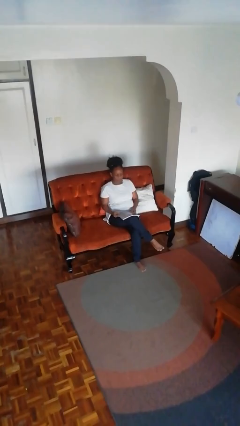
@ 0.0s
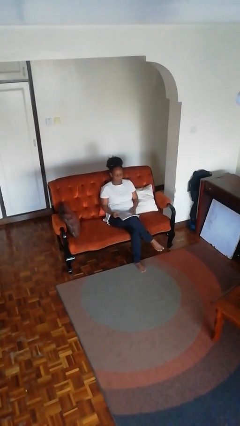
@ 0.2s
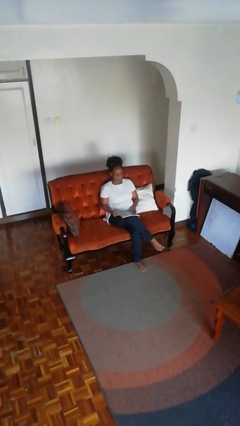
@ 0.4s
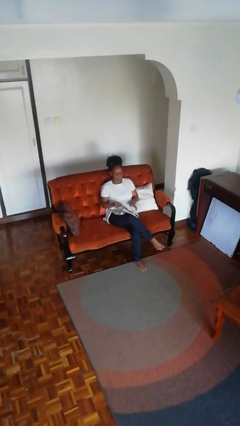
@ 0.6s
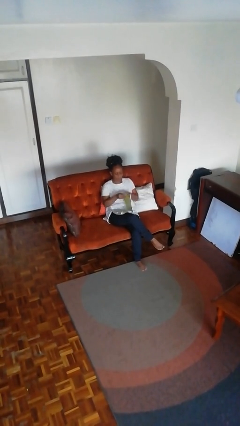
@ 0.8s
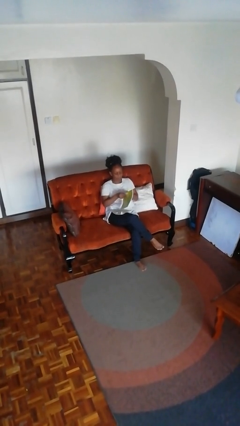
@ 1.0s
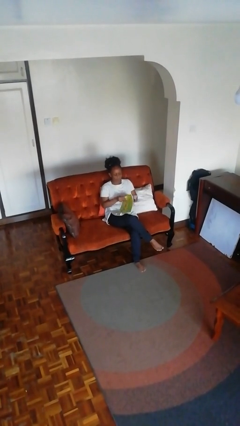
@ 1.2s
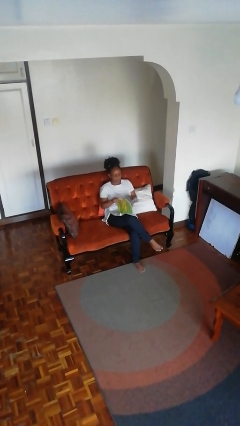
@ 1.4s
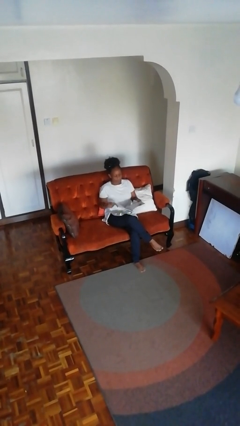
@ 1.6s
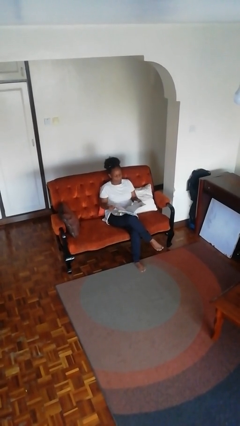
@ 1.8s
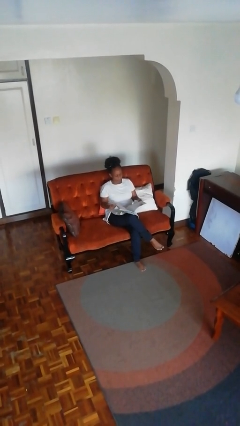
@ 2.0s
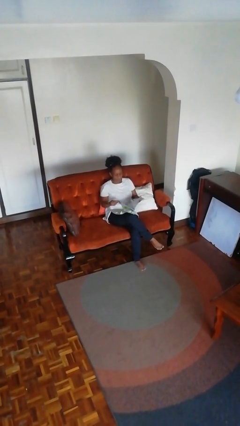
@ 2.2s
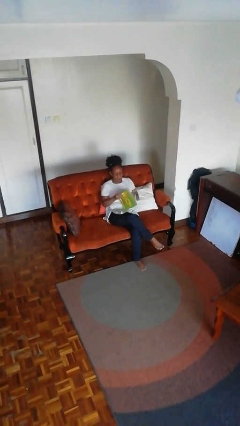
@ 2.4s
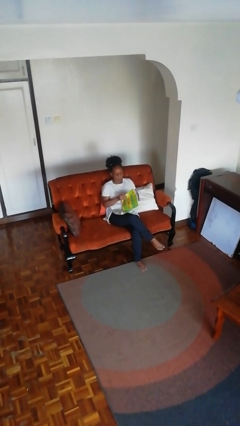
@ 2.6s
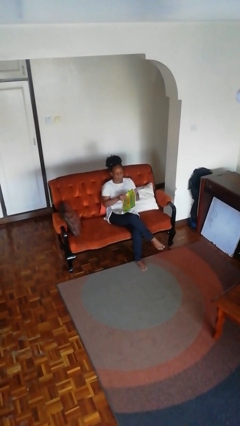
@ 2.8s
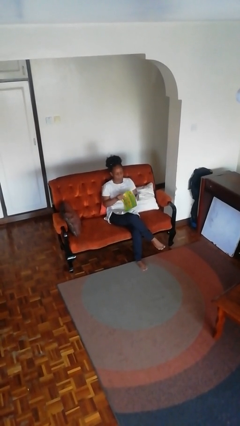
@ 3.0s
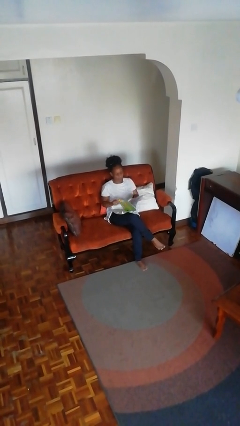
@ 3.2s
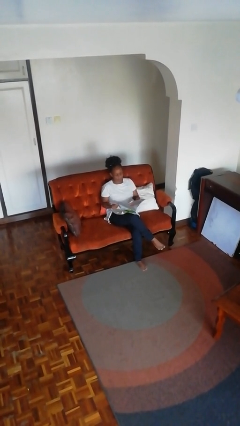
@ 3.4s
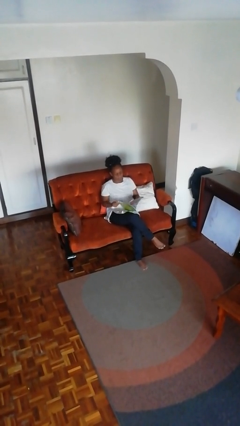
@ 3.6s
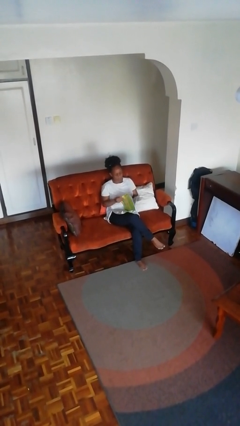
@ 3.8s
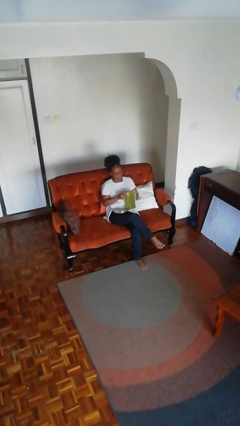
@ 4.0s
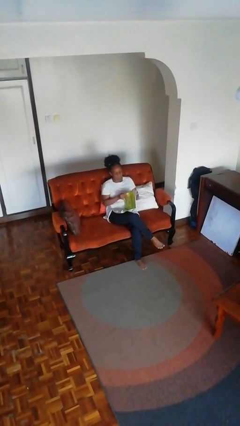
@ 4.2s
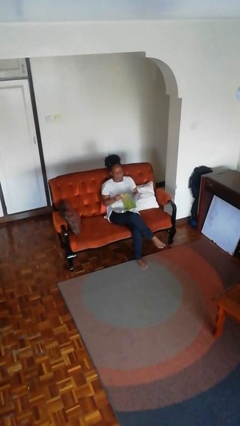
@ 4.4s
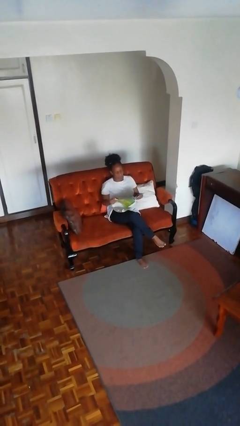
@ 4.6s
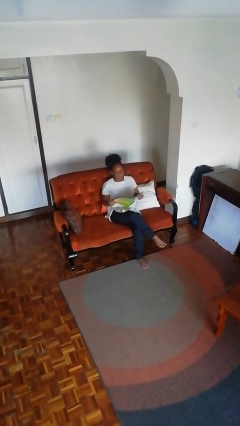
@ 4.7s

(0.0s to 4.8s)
person reads magazine

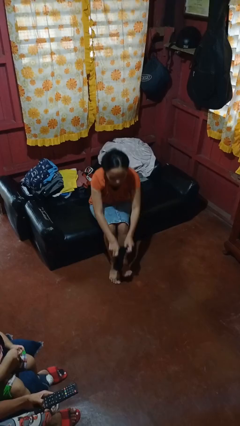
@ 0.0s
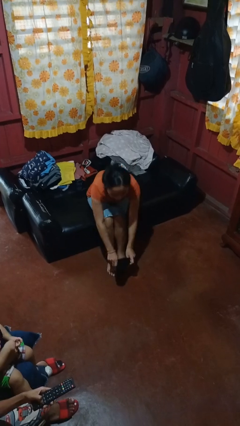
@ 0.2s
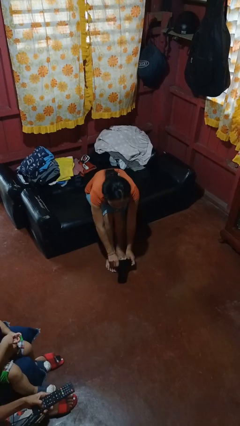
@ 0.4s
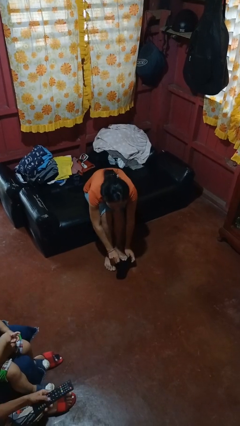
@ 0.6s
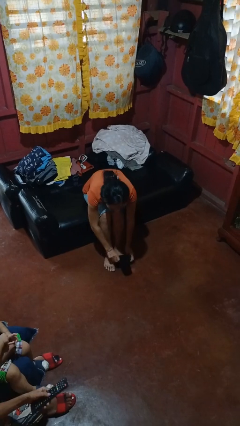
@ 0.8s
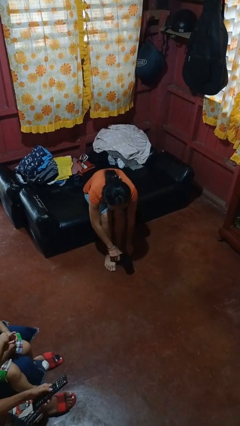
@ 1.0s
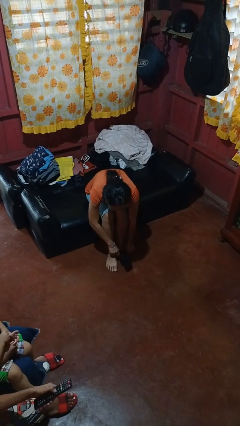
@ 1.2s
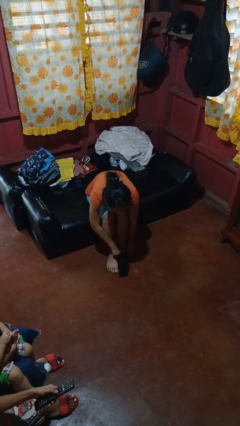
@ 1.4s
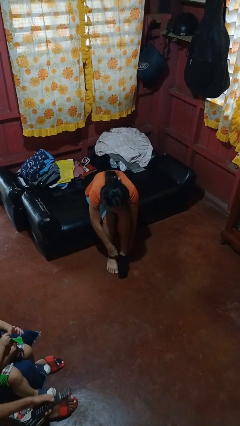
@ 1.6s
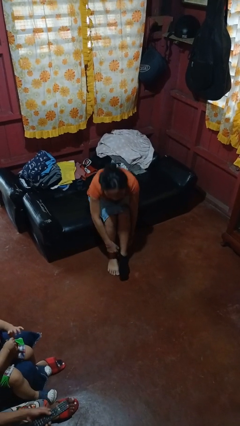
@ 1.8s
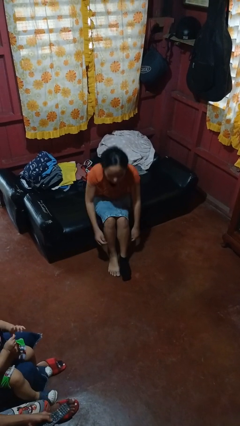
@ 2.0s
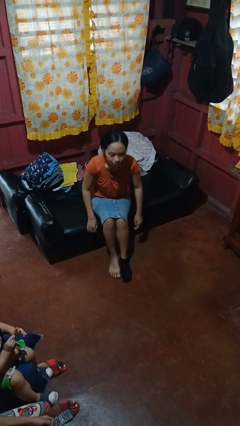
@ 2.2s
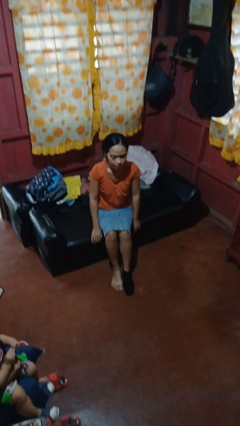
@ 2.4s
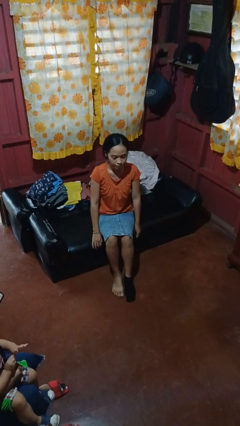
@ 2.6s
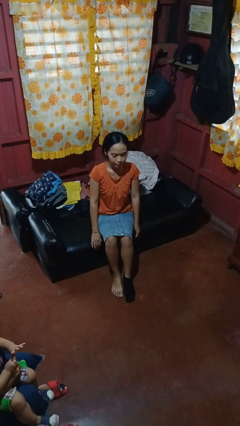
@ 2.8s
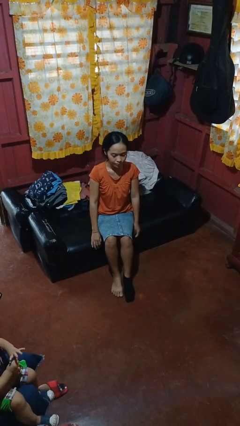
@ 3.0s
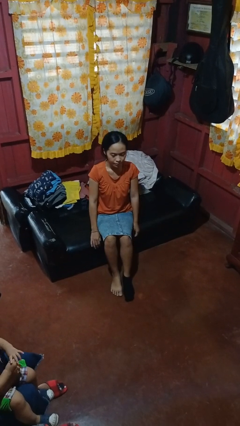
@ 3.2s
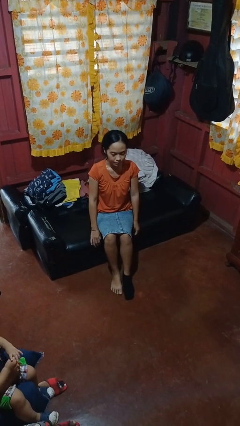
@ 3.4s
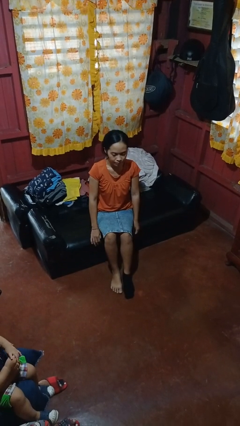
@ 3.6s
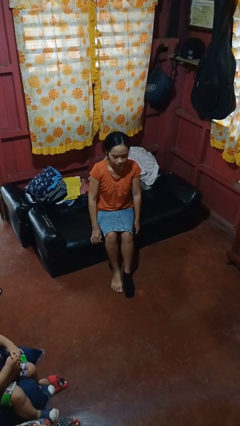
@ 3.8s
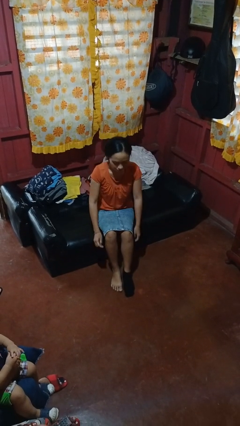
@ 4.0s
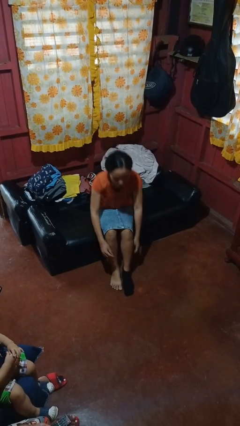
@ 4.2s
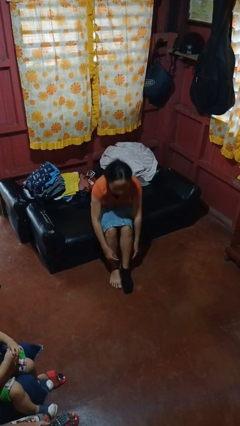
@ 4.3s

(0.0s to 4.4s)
person puts on socks

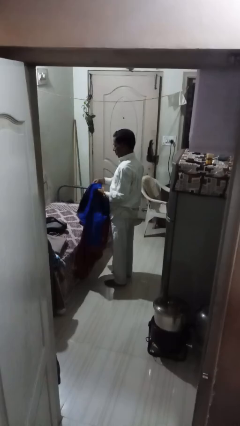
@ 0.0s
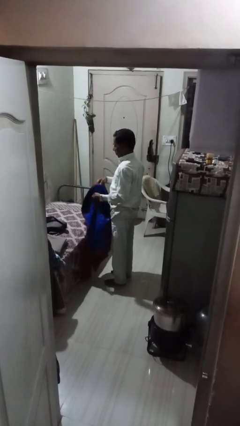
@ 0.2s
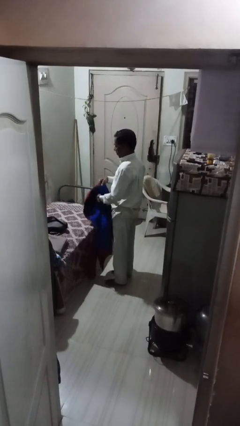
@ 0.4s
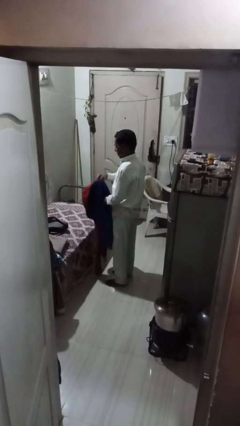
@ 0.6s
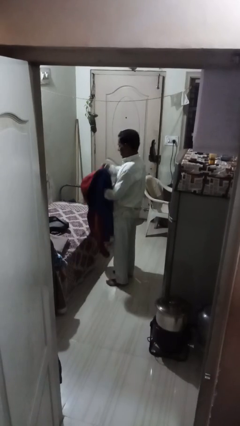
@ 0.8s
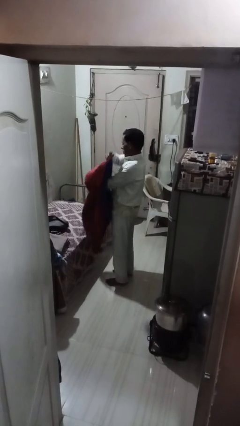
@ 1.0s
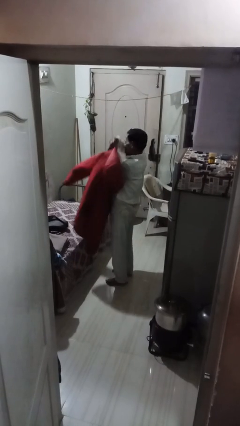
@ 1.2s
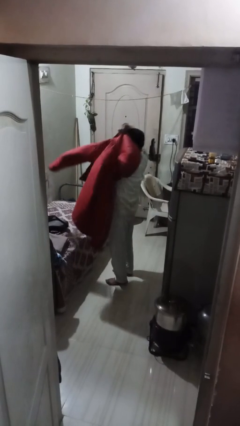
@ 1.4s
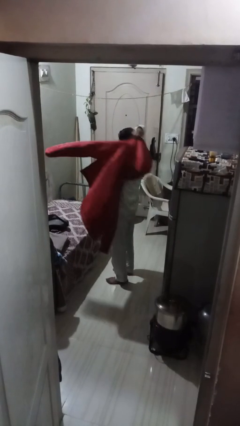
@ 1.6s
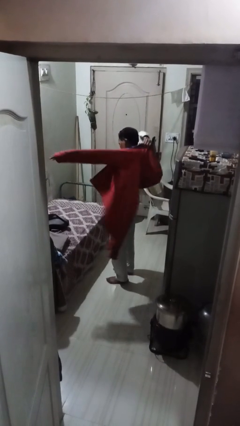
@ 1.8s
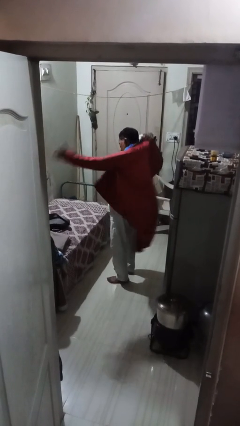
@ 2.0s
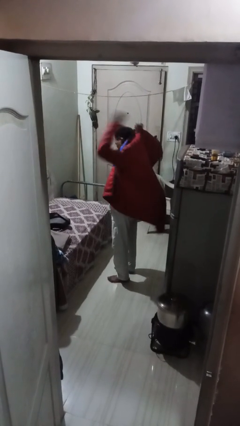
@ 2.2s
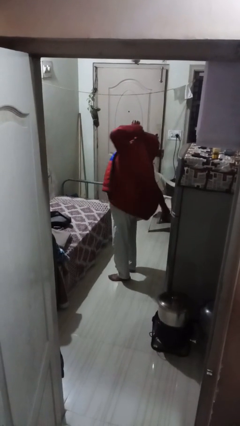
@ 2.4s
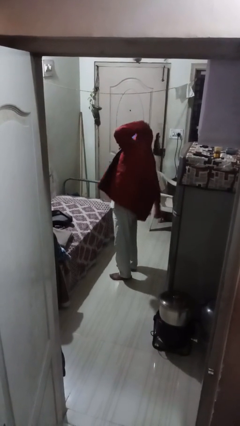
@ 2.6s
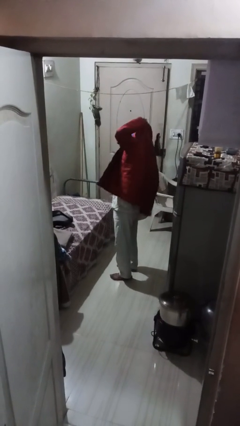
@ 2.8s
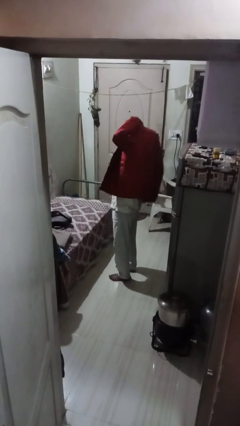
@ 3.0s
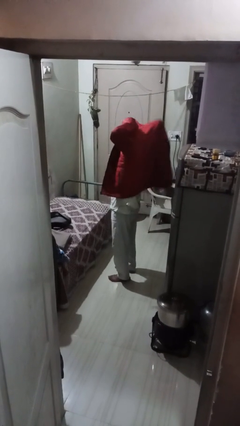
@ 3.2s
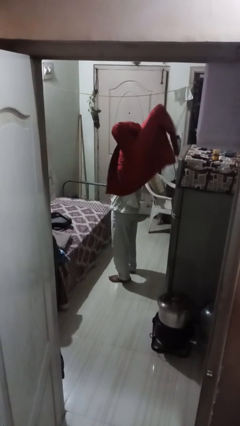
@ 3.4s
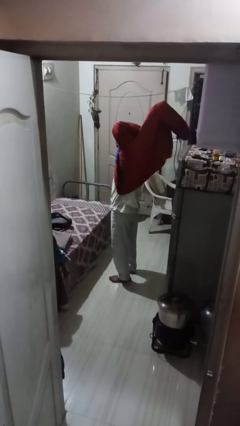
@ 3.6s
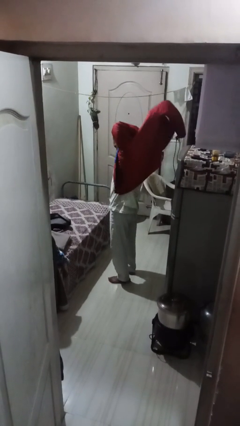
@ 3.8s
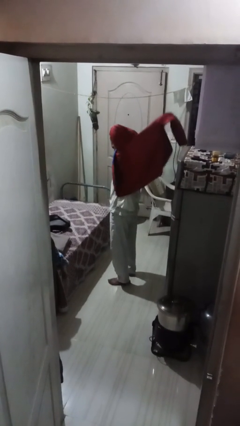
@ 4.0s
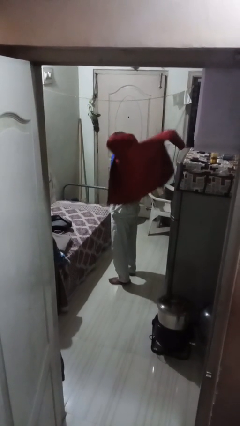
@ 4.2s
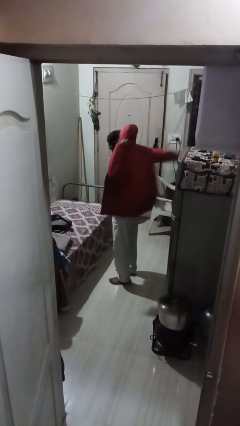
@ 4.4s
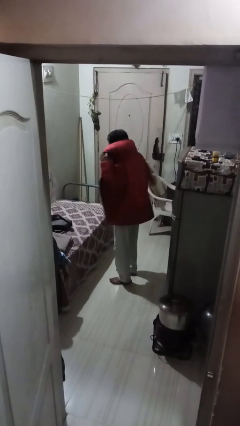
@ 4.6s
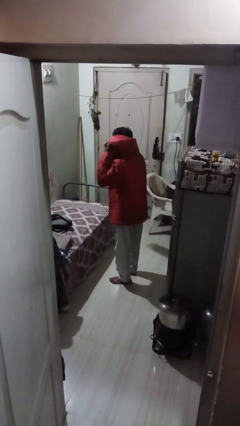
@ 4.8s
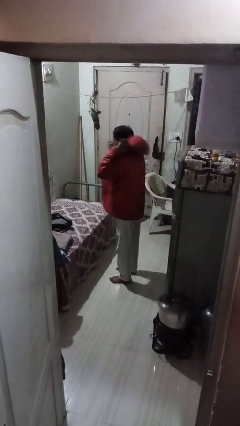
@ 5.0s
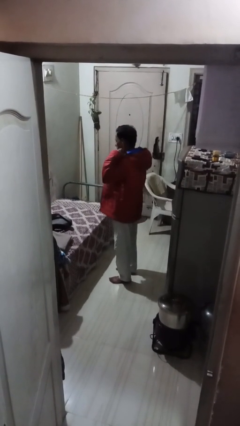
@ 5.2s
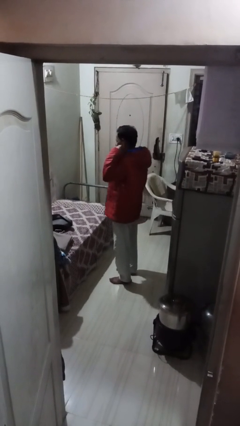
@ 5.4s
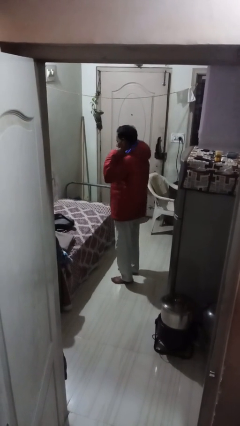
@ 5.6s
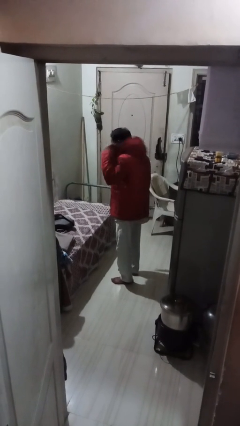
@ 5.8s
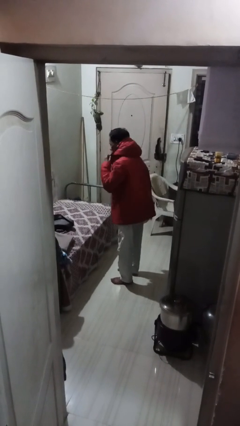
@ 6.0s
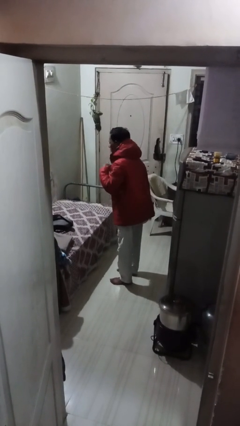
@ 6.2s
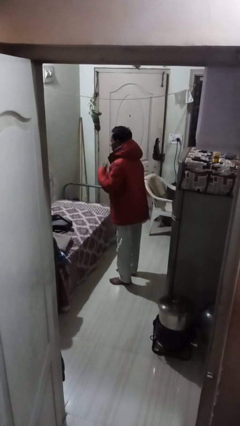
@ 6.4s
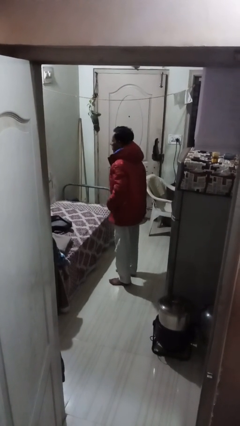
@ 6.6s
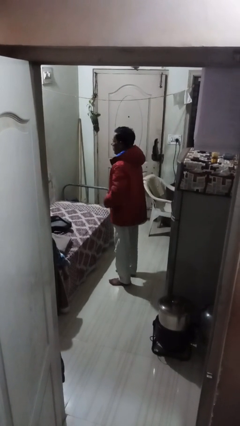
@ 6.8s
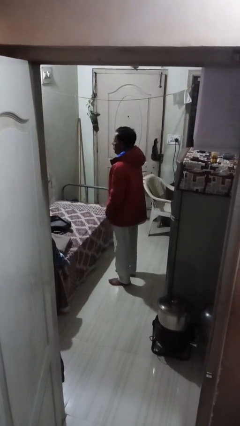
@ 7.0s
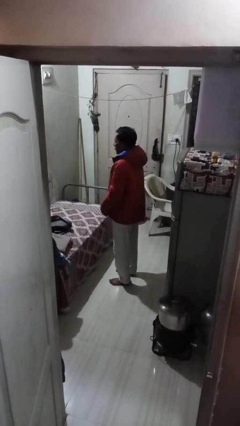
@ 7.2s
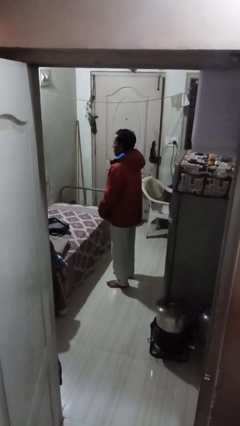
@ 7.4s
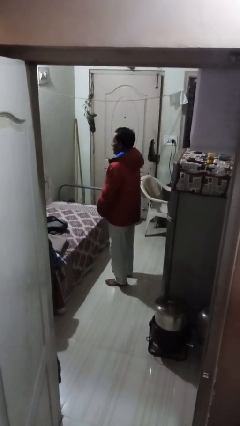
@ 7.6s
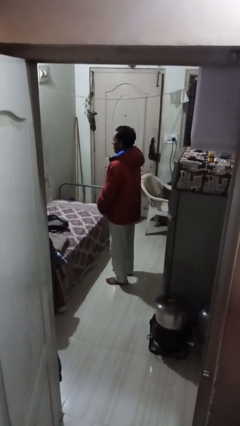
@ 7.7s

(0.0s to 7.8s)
person puts on jacket

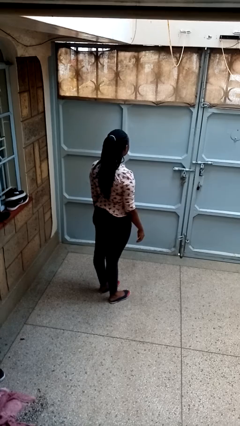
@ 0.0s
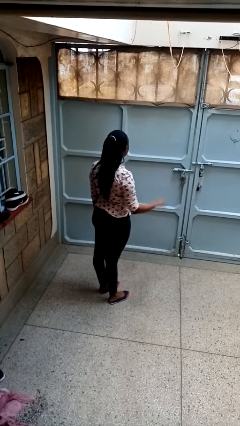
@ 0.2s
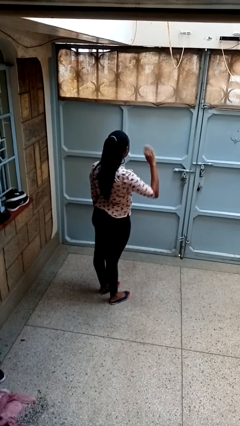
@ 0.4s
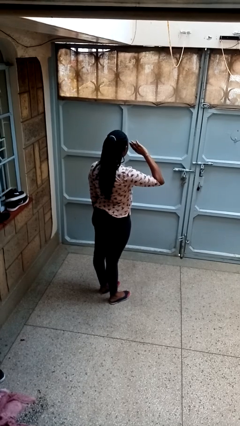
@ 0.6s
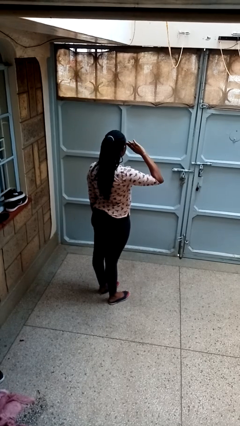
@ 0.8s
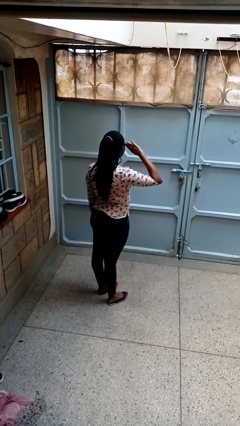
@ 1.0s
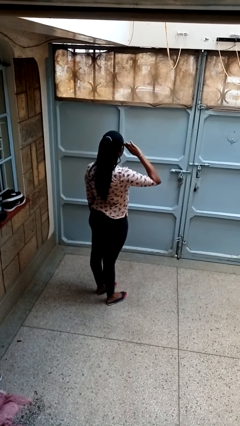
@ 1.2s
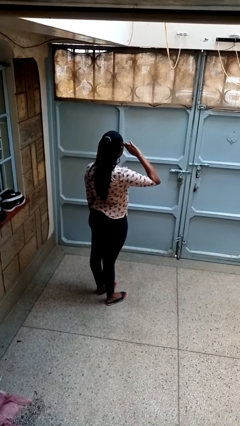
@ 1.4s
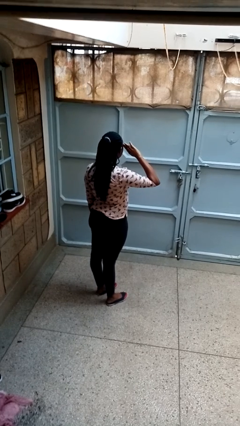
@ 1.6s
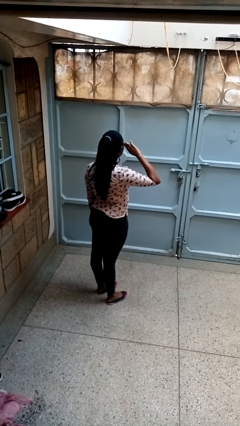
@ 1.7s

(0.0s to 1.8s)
person salutes
